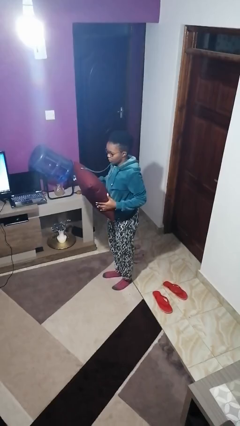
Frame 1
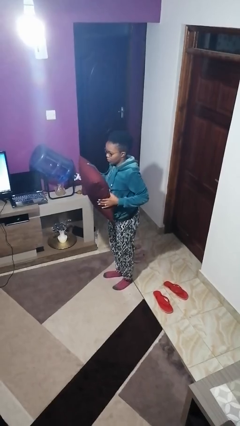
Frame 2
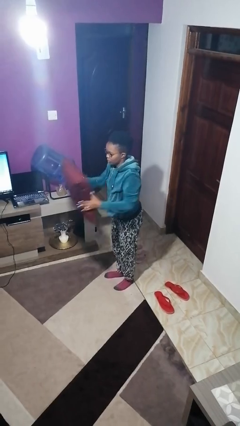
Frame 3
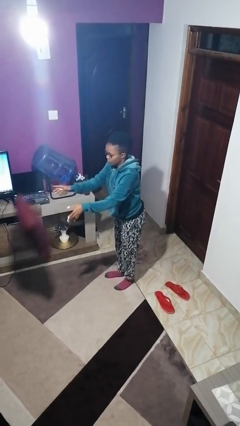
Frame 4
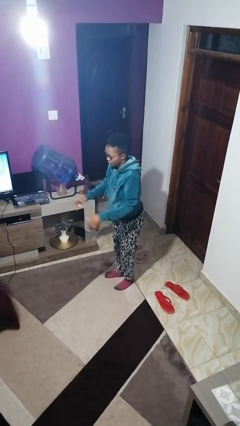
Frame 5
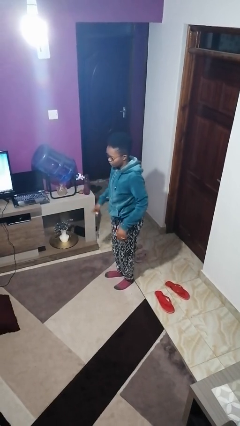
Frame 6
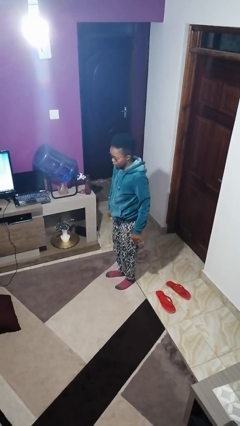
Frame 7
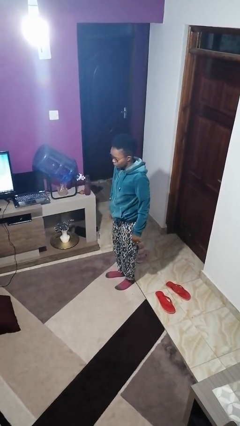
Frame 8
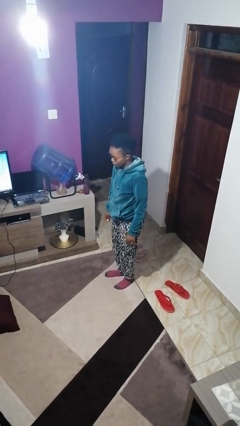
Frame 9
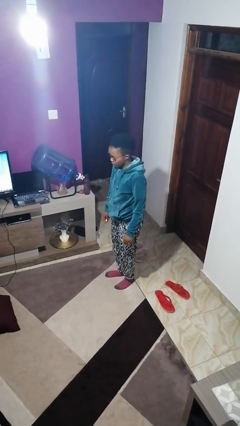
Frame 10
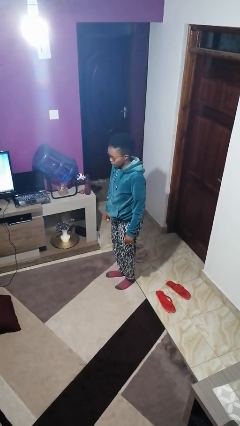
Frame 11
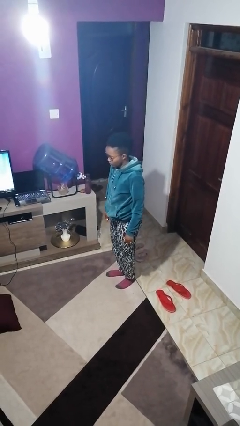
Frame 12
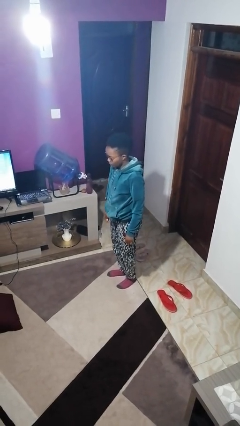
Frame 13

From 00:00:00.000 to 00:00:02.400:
person throws object to ground

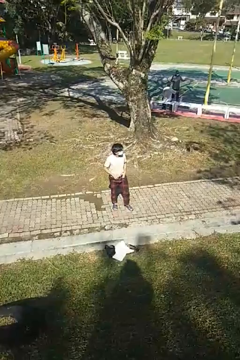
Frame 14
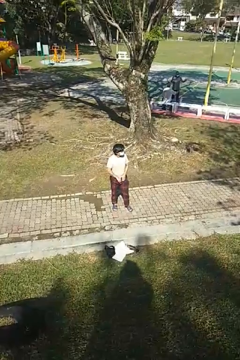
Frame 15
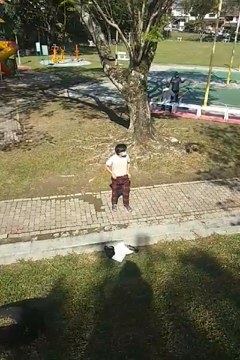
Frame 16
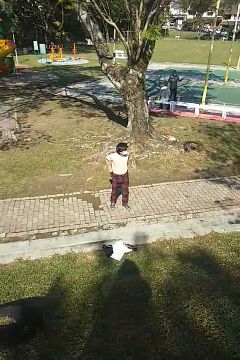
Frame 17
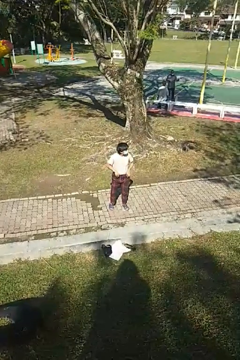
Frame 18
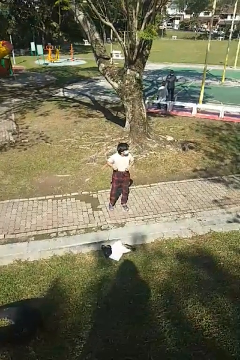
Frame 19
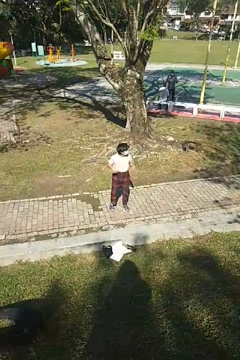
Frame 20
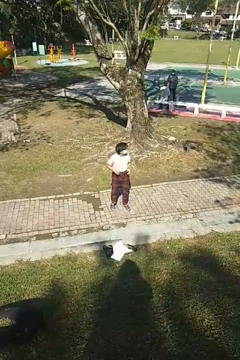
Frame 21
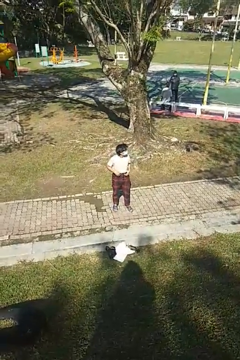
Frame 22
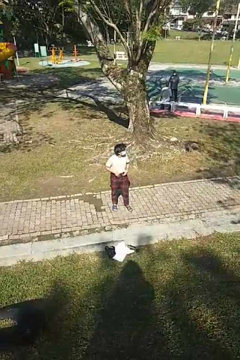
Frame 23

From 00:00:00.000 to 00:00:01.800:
person hikes up pants

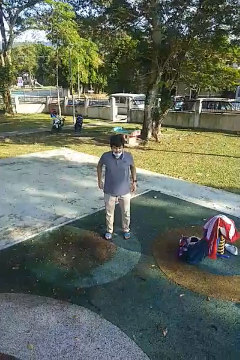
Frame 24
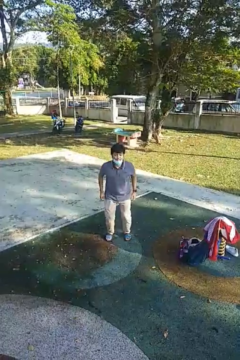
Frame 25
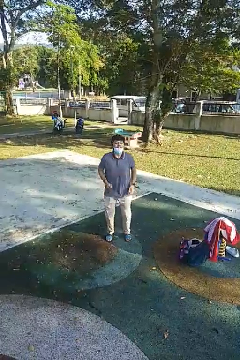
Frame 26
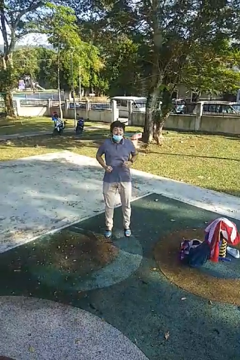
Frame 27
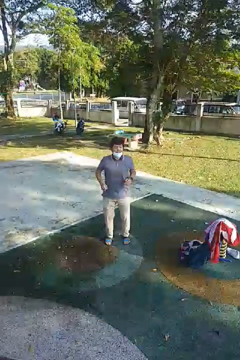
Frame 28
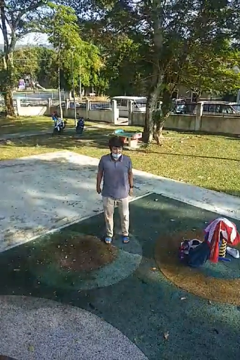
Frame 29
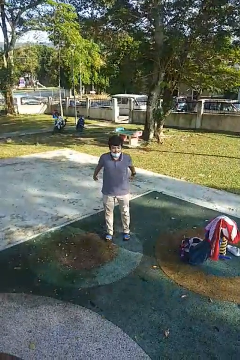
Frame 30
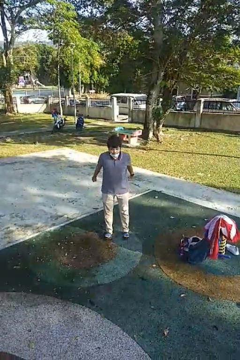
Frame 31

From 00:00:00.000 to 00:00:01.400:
person jumps

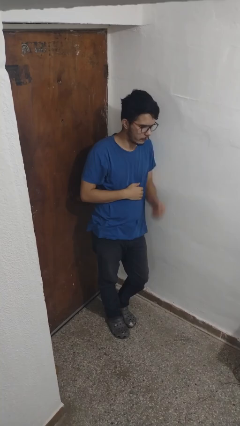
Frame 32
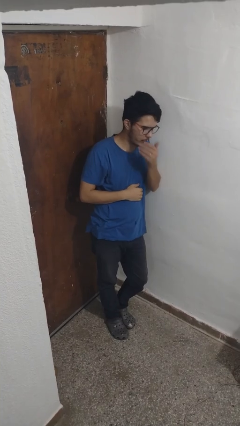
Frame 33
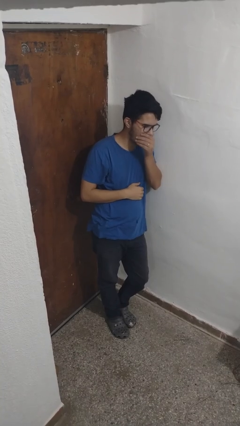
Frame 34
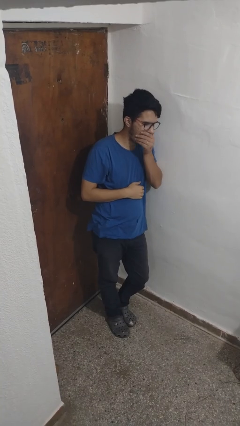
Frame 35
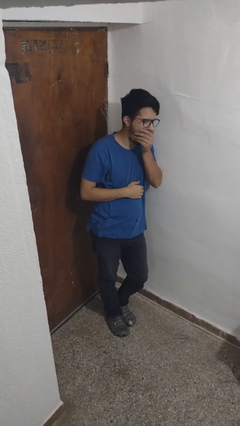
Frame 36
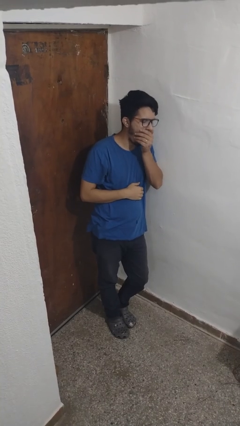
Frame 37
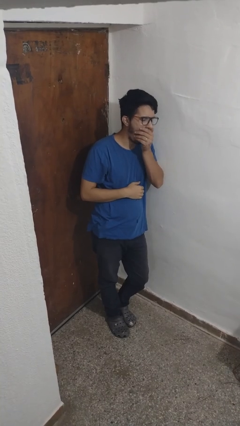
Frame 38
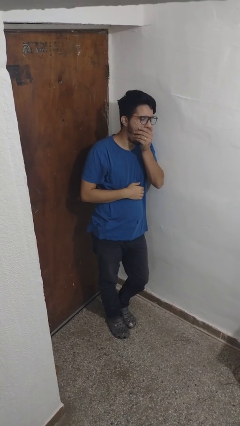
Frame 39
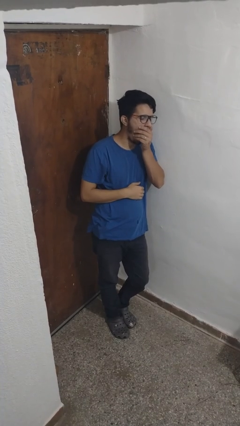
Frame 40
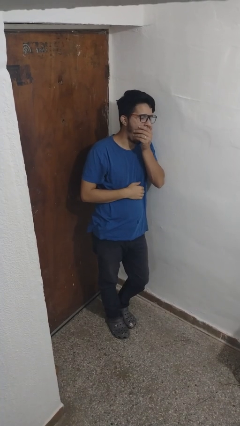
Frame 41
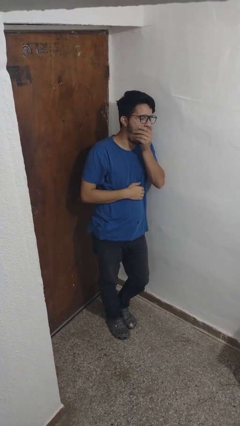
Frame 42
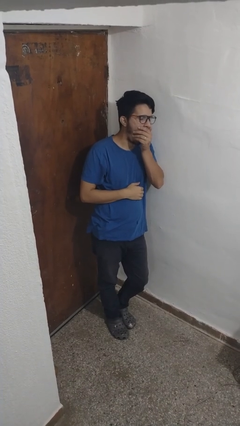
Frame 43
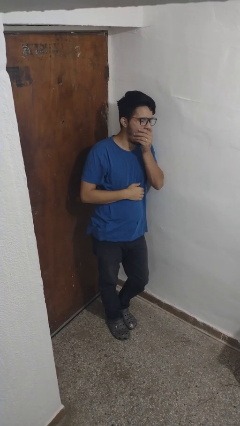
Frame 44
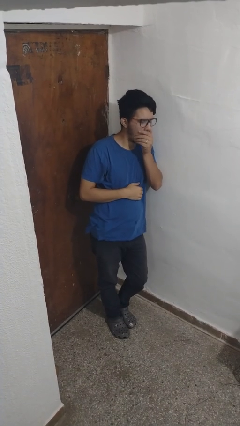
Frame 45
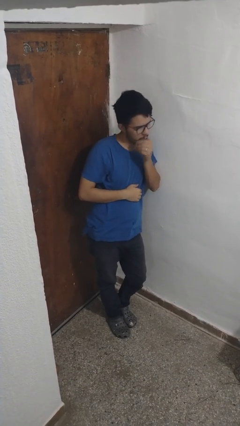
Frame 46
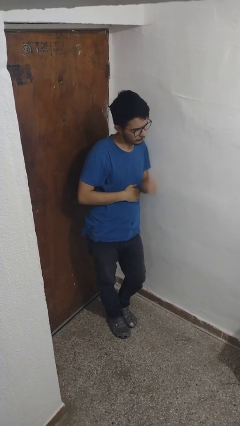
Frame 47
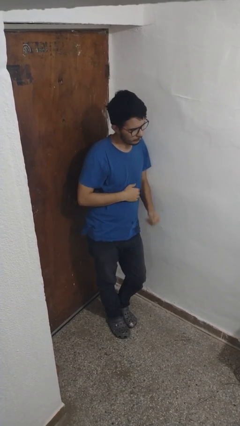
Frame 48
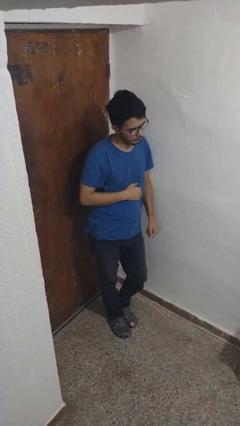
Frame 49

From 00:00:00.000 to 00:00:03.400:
person yawns

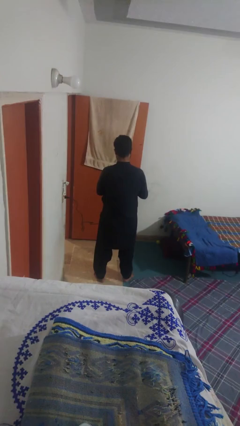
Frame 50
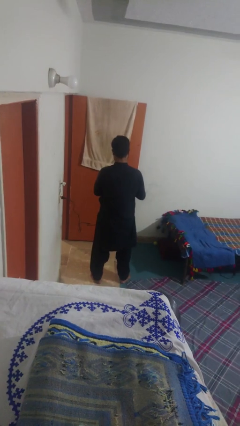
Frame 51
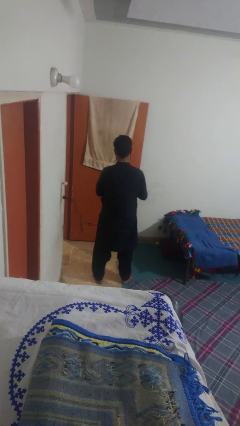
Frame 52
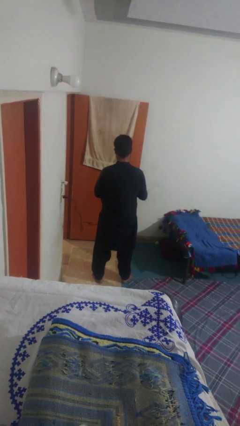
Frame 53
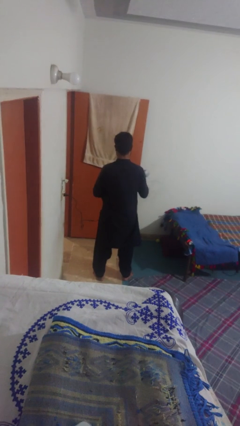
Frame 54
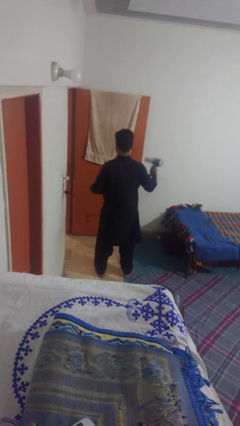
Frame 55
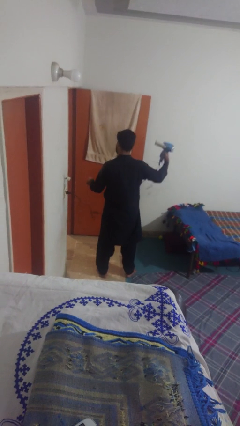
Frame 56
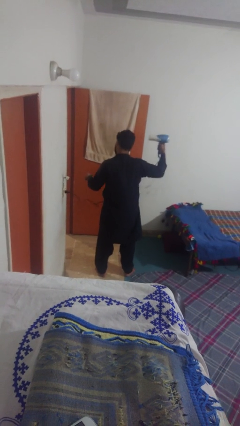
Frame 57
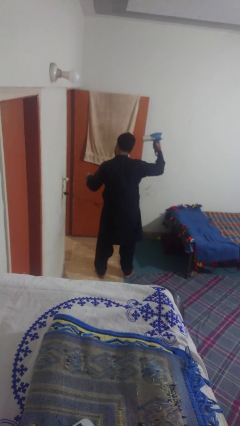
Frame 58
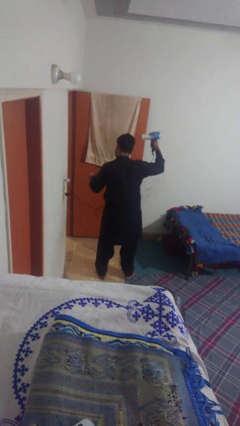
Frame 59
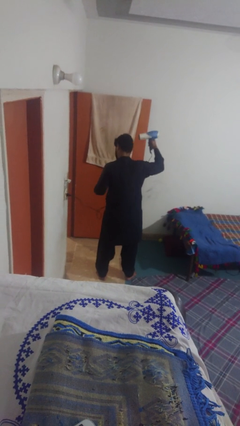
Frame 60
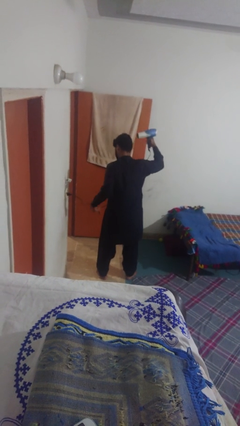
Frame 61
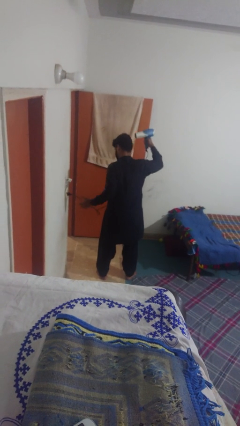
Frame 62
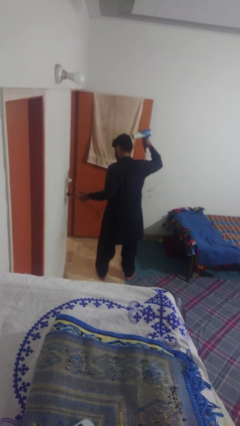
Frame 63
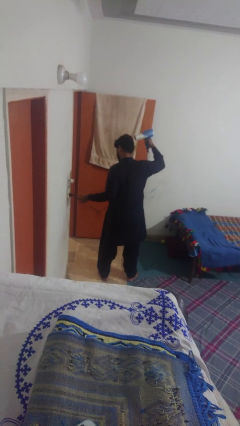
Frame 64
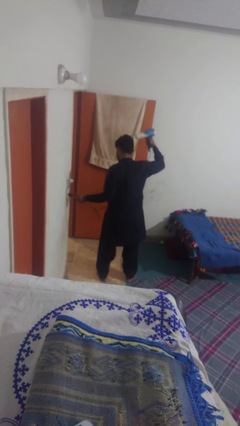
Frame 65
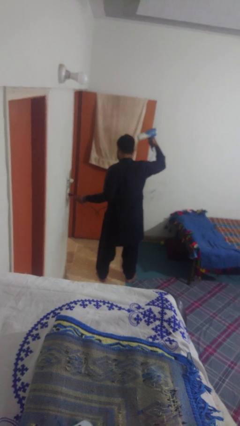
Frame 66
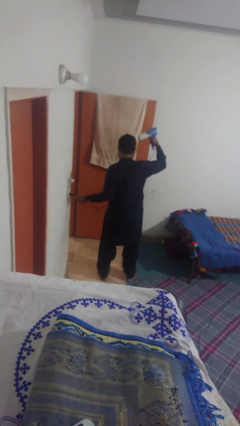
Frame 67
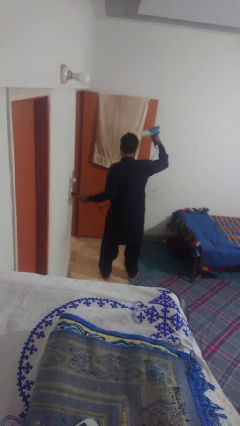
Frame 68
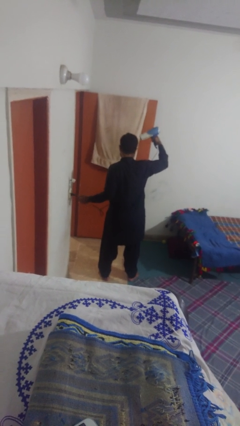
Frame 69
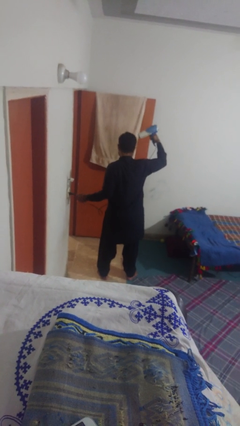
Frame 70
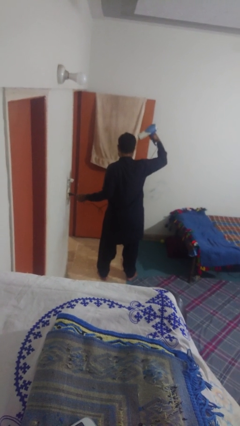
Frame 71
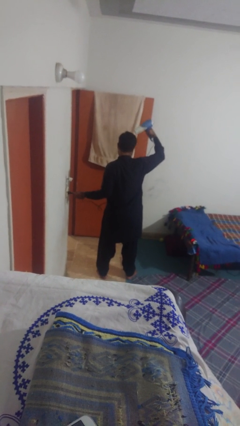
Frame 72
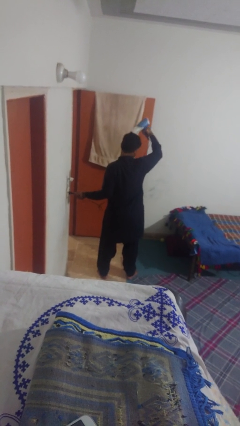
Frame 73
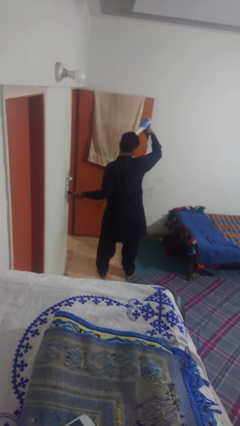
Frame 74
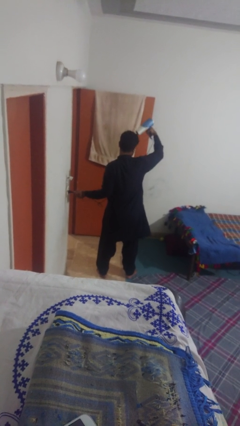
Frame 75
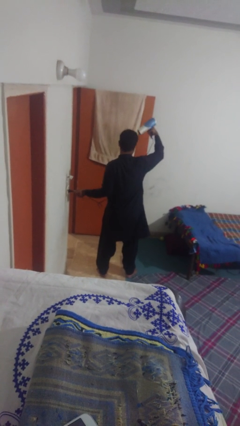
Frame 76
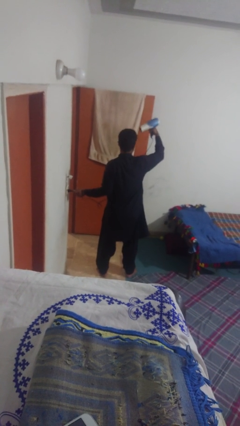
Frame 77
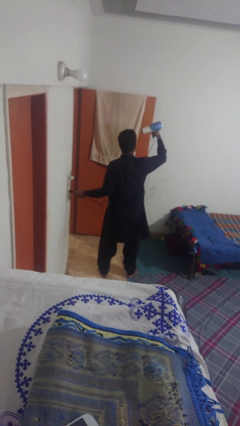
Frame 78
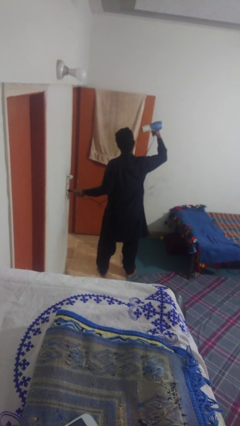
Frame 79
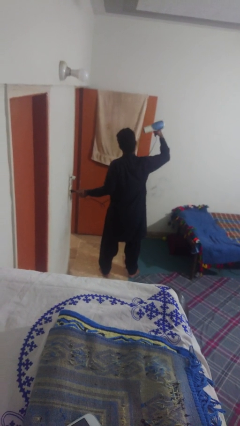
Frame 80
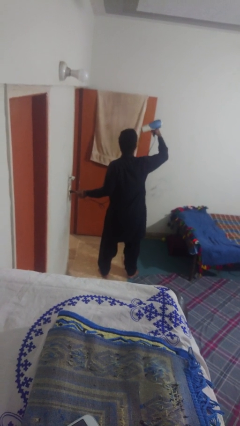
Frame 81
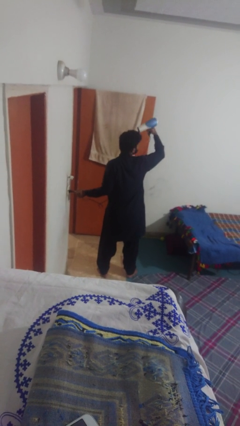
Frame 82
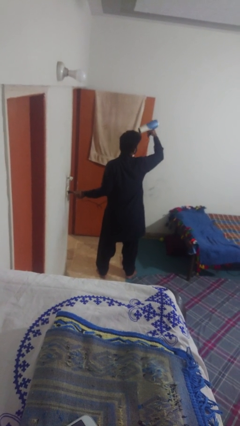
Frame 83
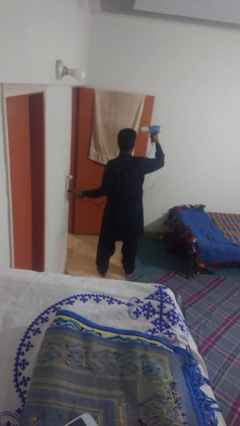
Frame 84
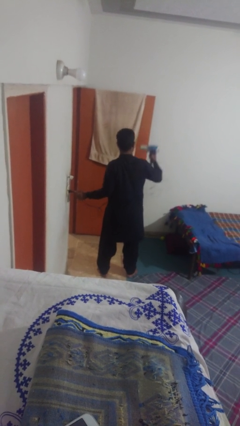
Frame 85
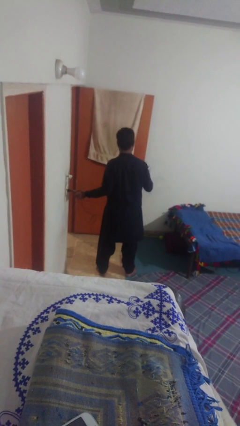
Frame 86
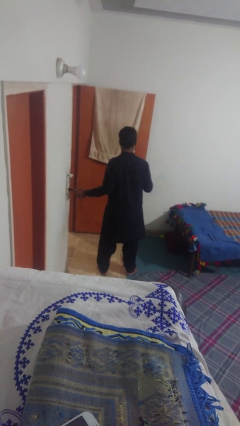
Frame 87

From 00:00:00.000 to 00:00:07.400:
person dries hair with hairdryer

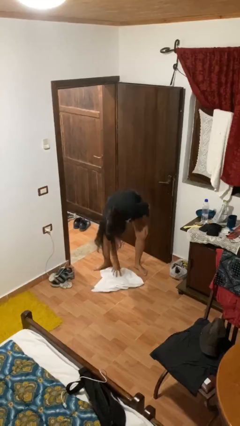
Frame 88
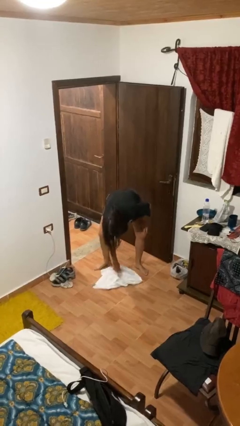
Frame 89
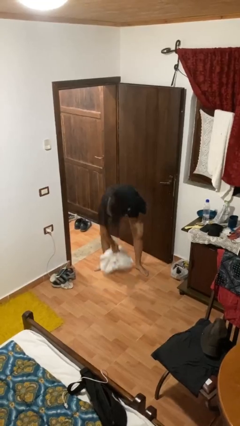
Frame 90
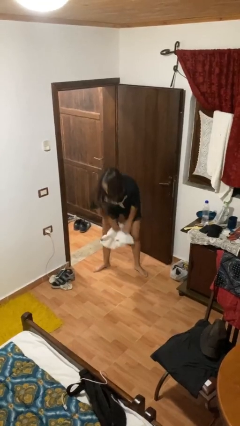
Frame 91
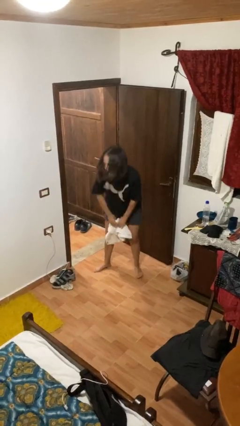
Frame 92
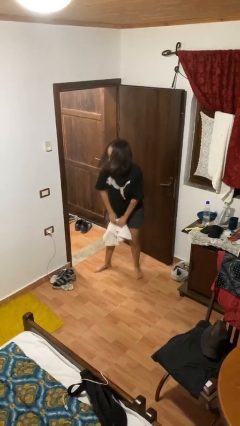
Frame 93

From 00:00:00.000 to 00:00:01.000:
person picks up object from floor

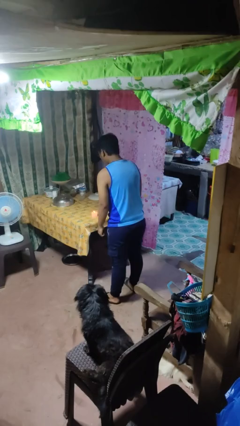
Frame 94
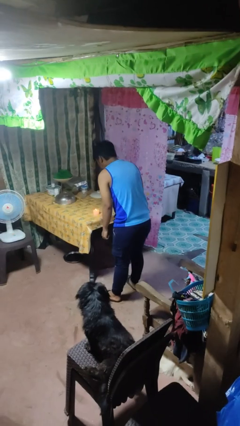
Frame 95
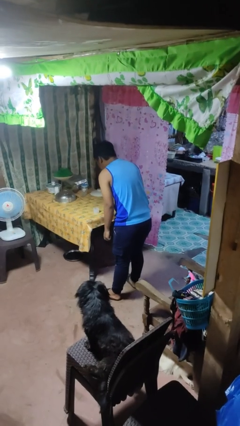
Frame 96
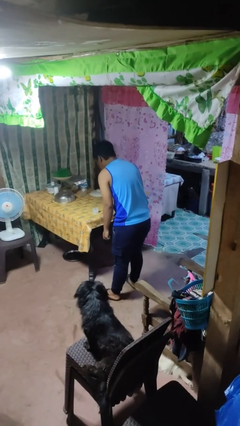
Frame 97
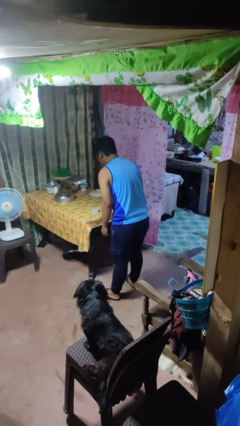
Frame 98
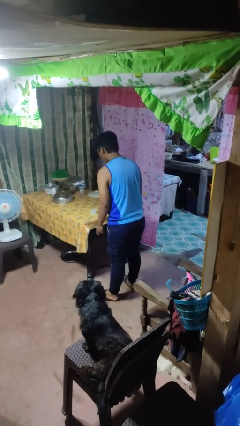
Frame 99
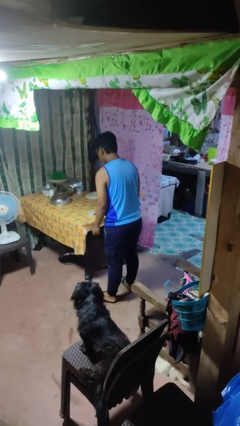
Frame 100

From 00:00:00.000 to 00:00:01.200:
person extinguishes candle
